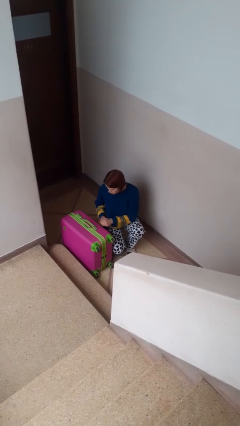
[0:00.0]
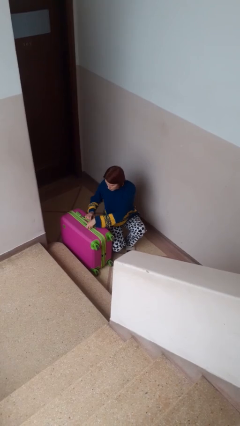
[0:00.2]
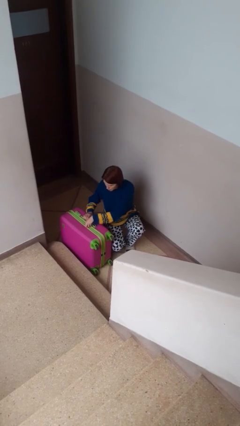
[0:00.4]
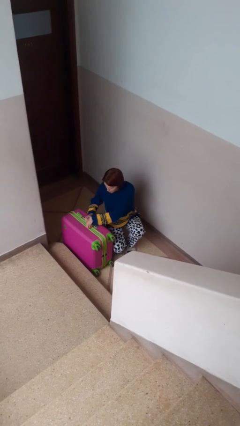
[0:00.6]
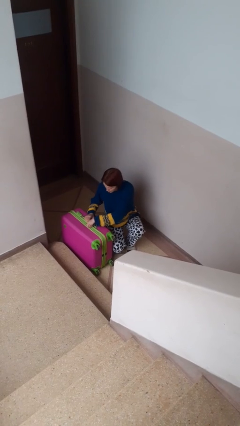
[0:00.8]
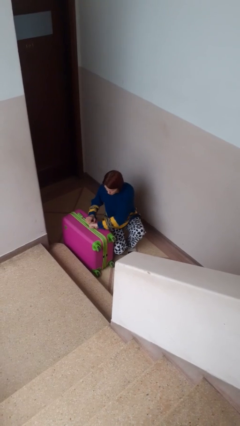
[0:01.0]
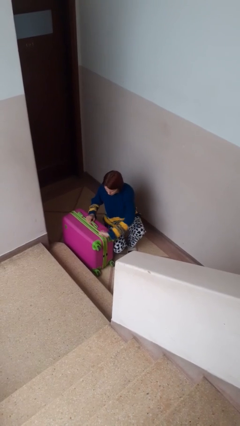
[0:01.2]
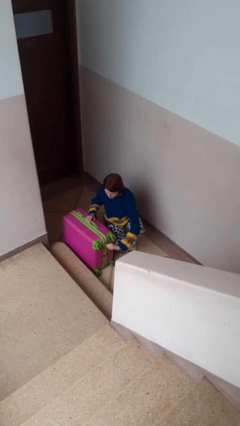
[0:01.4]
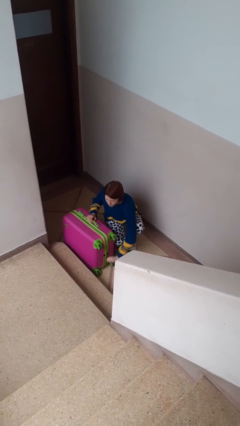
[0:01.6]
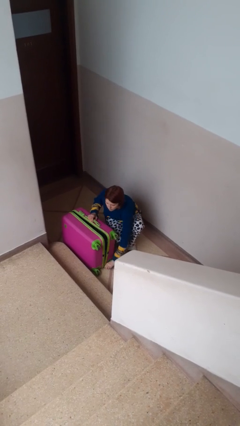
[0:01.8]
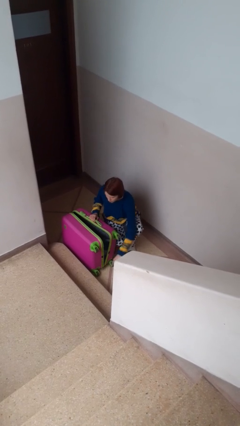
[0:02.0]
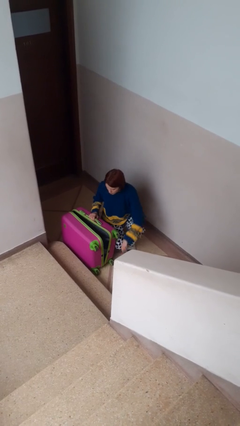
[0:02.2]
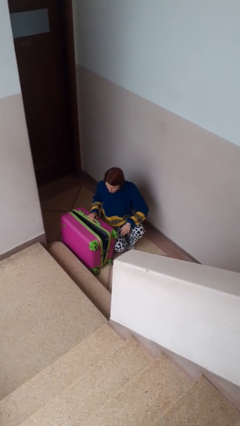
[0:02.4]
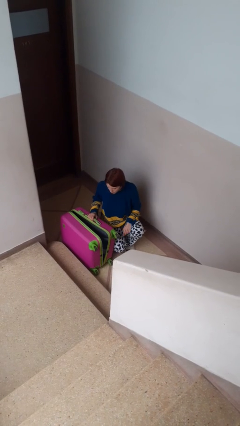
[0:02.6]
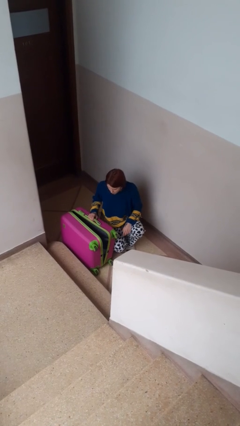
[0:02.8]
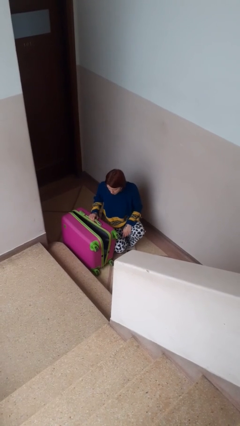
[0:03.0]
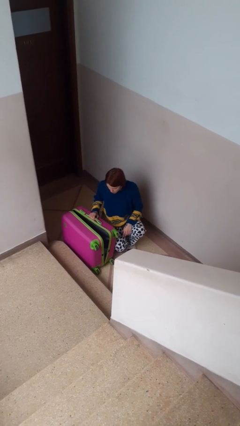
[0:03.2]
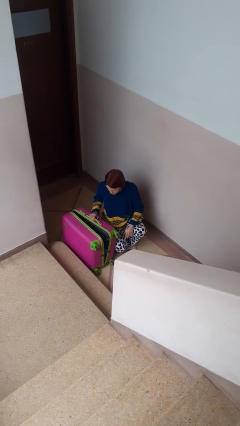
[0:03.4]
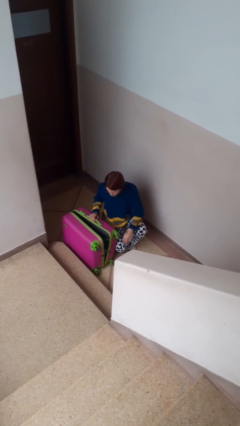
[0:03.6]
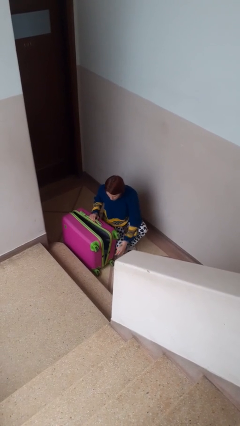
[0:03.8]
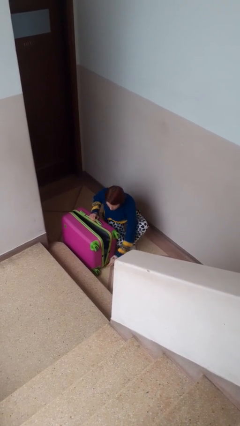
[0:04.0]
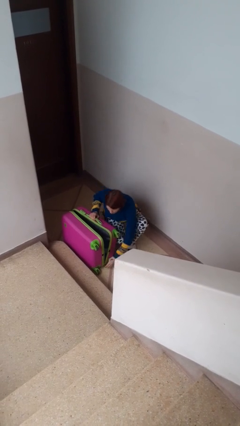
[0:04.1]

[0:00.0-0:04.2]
person opens suitcase

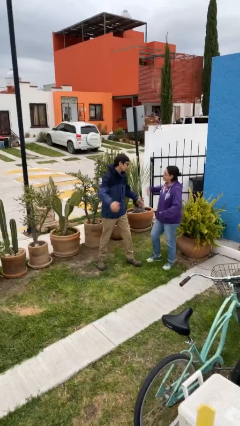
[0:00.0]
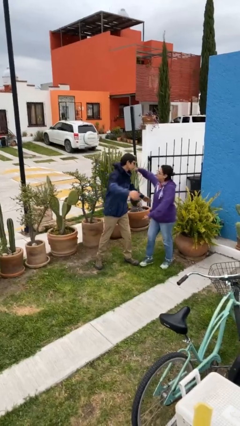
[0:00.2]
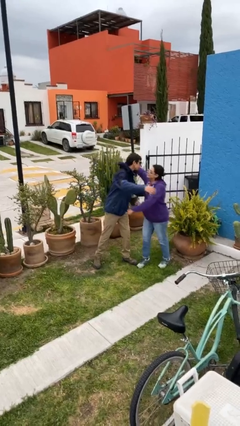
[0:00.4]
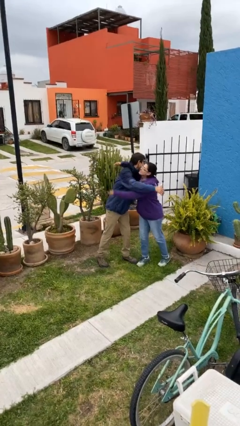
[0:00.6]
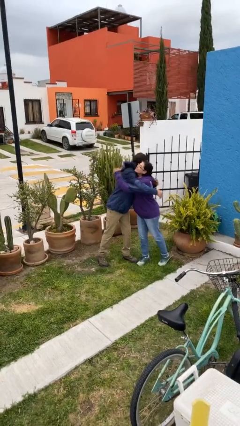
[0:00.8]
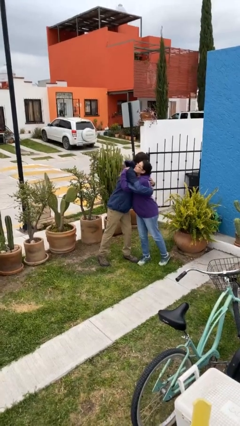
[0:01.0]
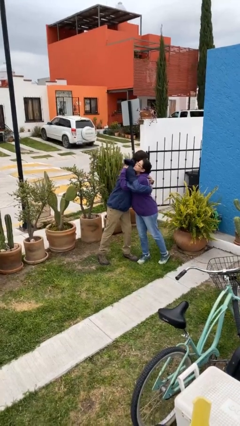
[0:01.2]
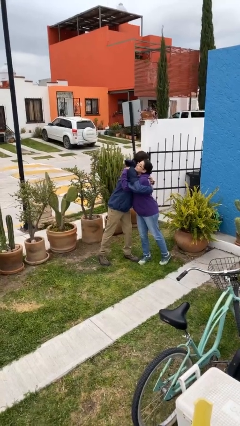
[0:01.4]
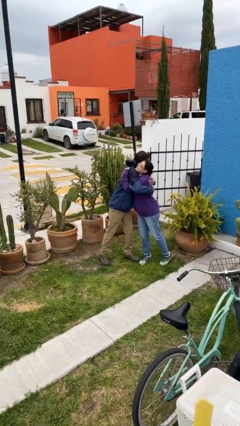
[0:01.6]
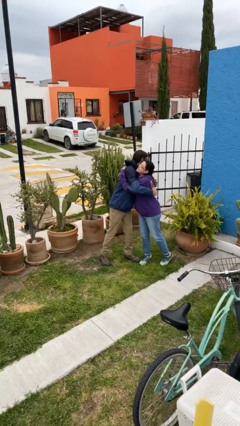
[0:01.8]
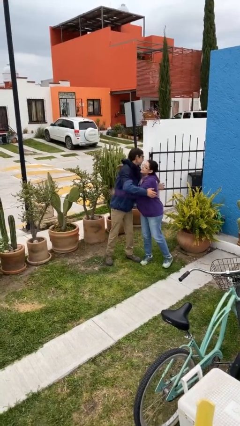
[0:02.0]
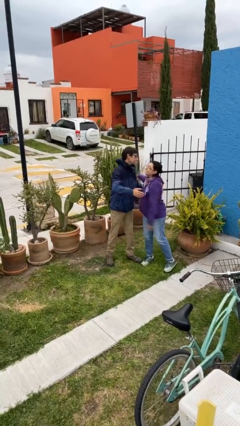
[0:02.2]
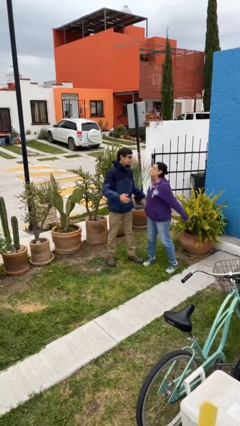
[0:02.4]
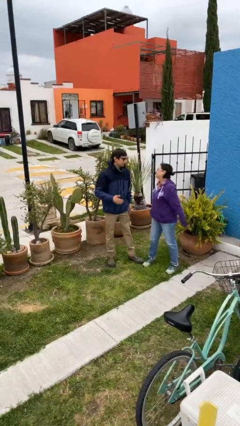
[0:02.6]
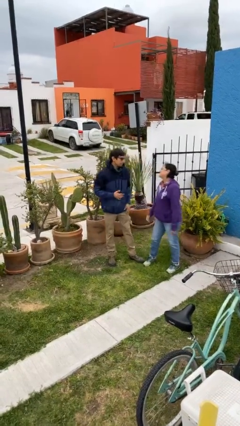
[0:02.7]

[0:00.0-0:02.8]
person embraces person

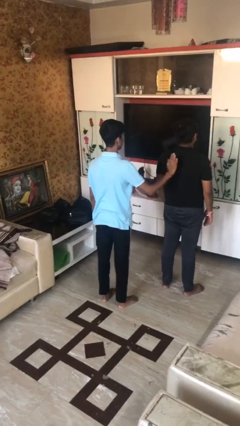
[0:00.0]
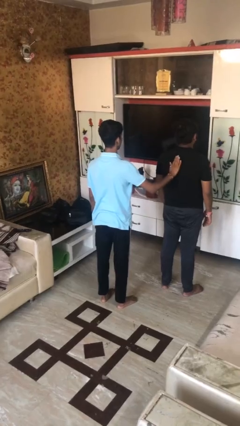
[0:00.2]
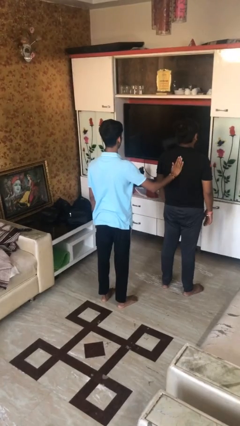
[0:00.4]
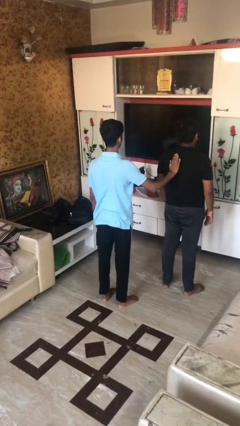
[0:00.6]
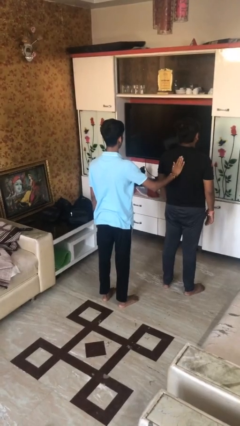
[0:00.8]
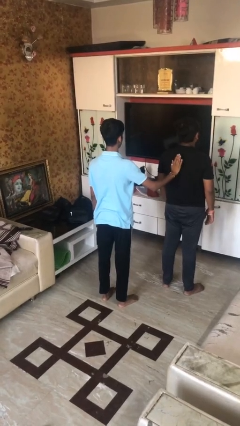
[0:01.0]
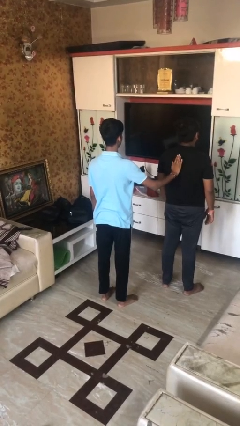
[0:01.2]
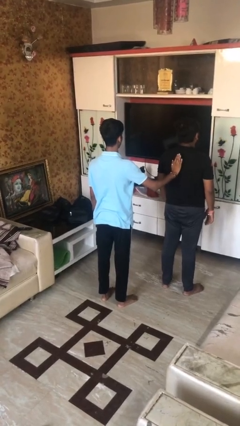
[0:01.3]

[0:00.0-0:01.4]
person touches back of person

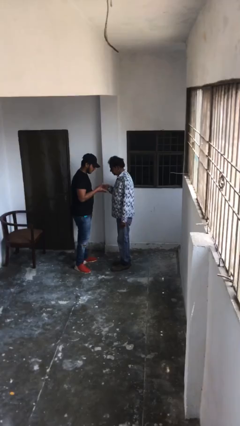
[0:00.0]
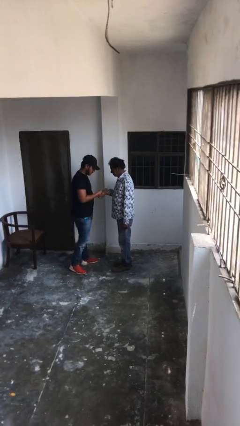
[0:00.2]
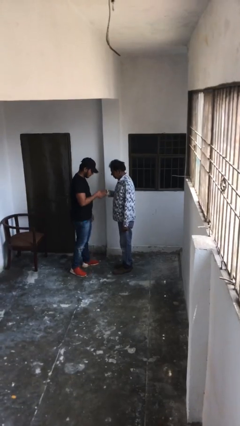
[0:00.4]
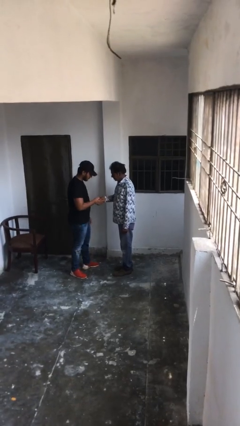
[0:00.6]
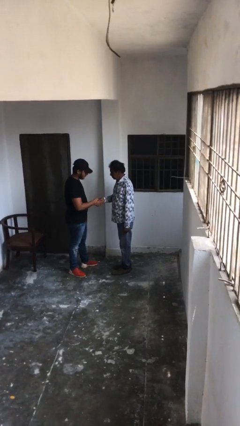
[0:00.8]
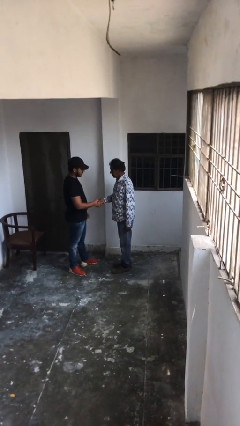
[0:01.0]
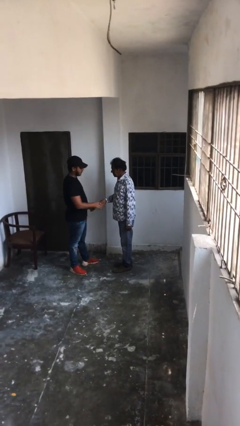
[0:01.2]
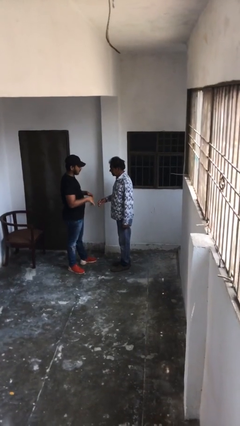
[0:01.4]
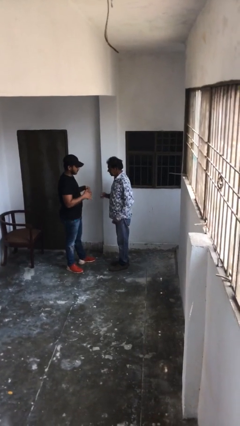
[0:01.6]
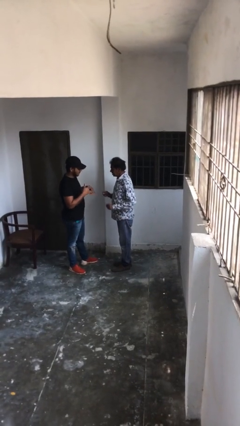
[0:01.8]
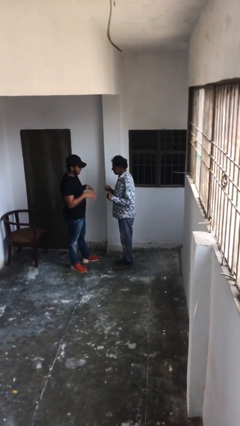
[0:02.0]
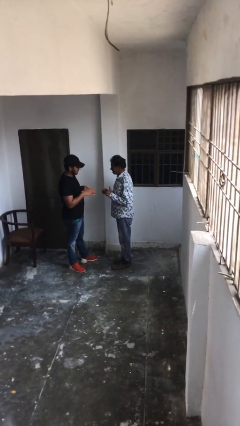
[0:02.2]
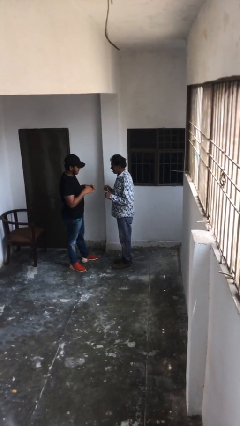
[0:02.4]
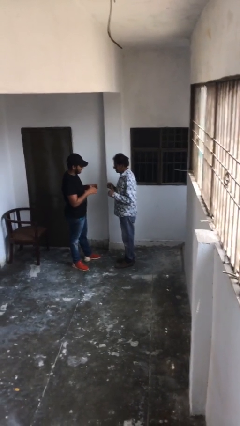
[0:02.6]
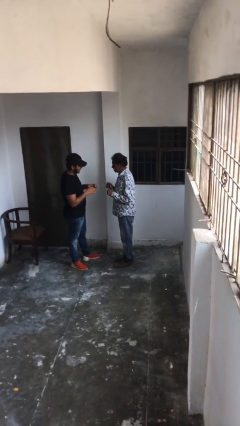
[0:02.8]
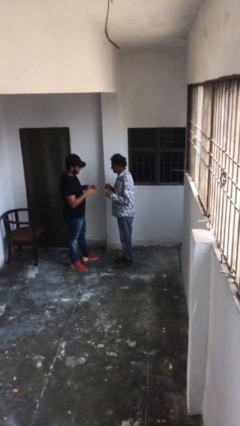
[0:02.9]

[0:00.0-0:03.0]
person shakes hand

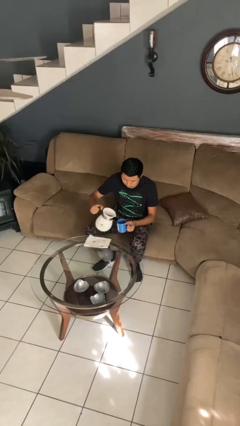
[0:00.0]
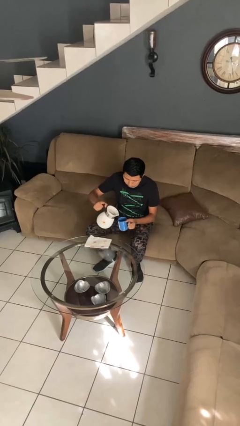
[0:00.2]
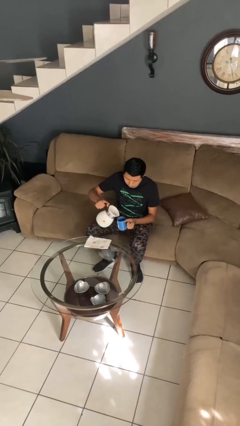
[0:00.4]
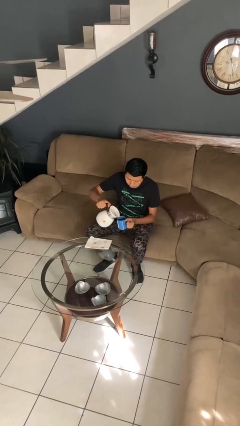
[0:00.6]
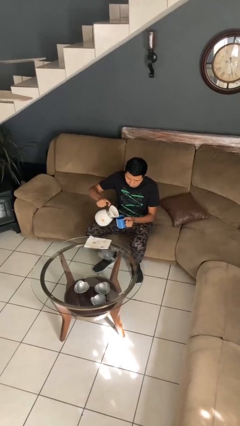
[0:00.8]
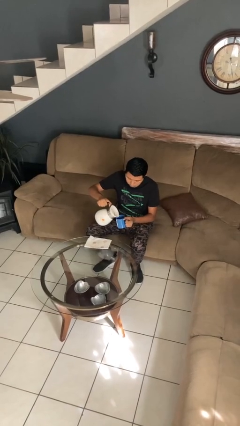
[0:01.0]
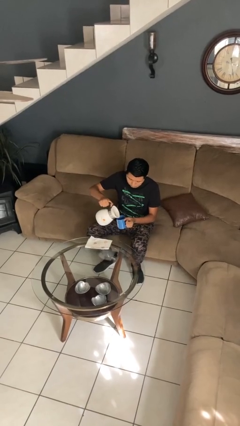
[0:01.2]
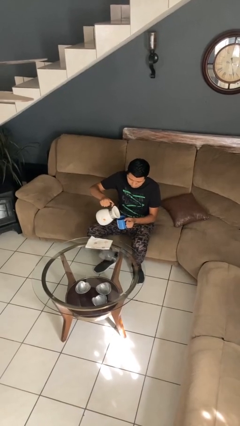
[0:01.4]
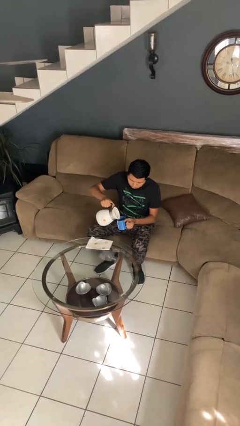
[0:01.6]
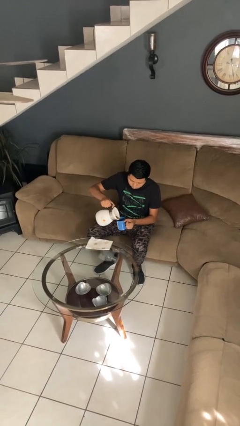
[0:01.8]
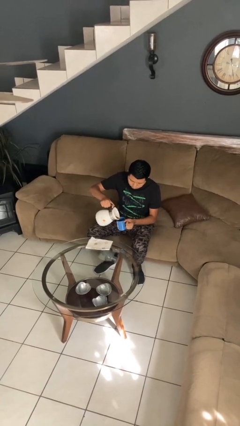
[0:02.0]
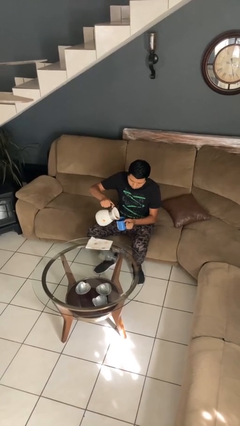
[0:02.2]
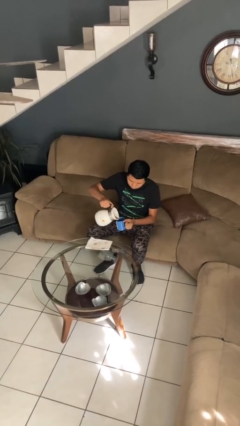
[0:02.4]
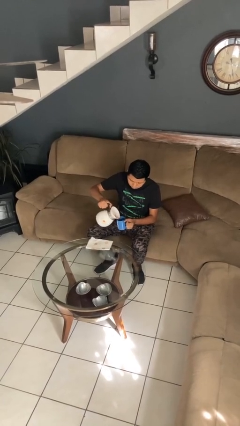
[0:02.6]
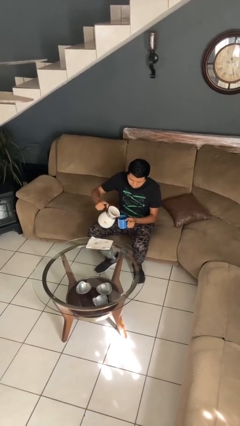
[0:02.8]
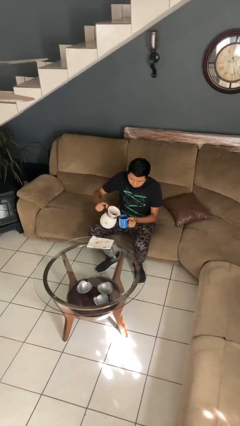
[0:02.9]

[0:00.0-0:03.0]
person pours coffee into mug

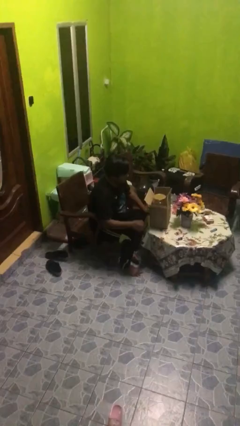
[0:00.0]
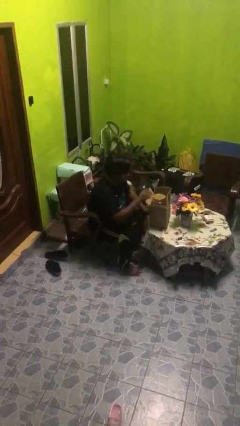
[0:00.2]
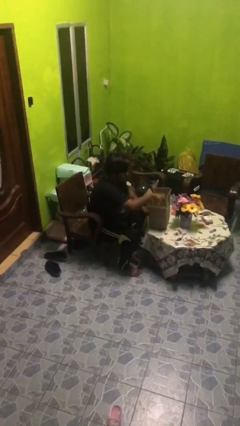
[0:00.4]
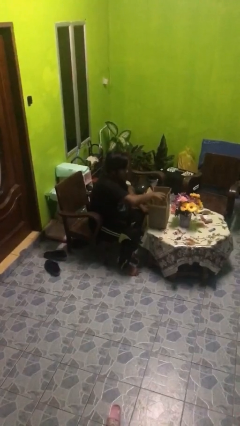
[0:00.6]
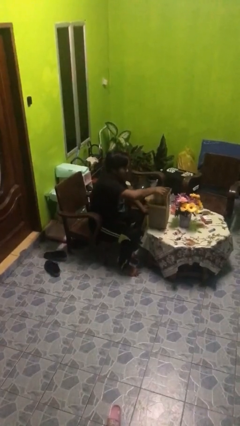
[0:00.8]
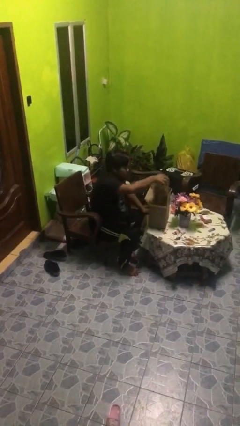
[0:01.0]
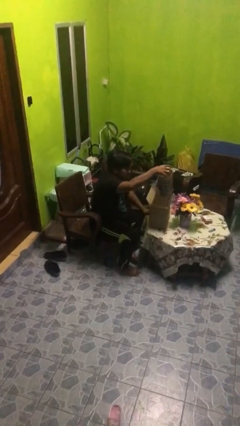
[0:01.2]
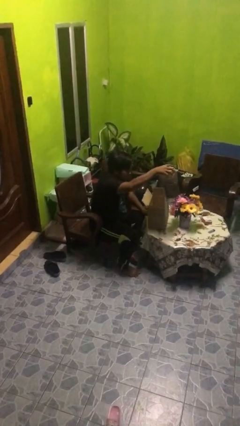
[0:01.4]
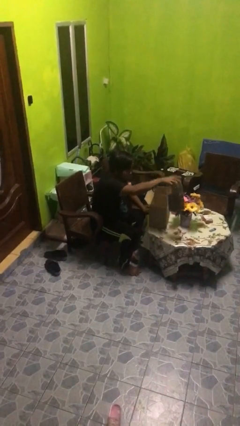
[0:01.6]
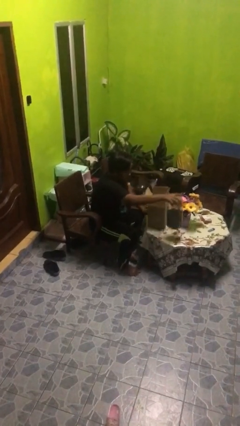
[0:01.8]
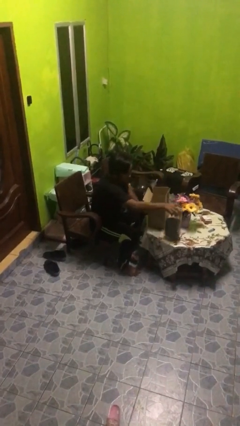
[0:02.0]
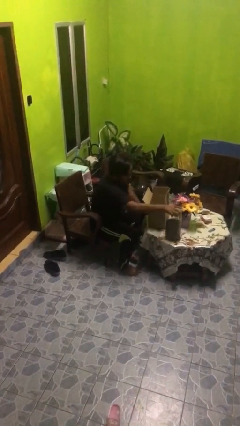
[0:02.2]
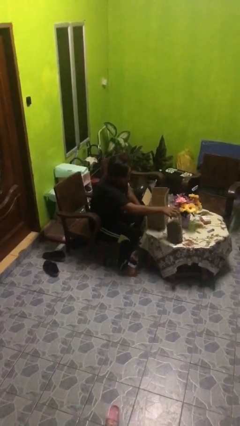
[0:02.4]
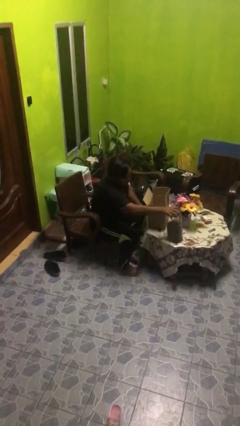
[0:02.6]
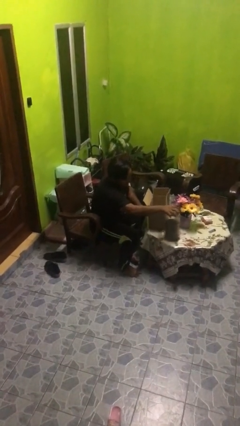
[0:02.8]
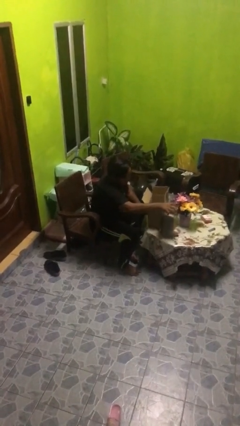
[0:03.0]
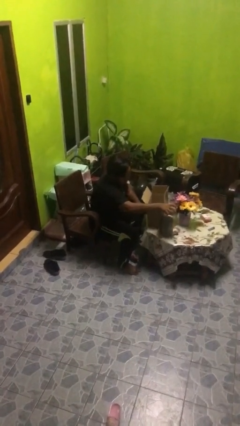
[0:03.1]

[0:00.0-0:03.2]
person takes object from box
